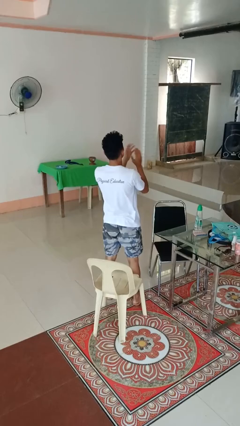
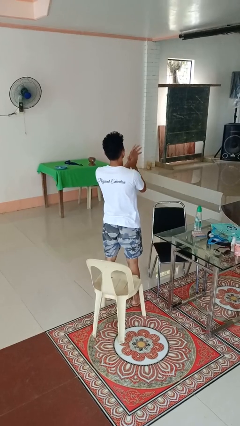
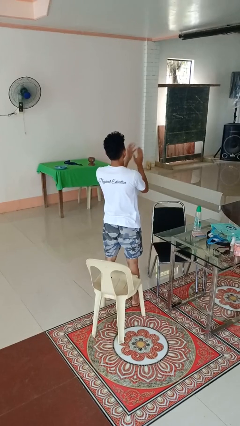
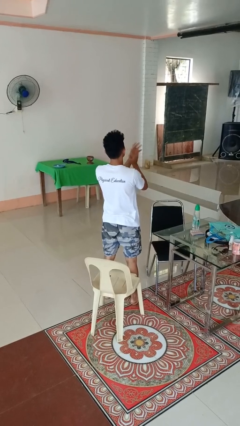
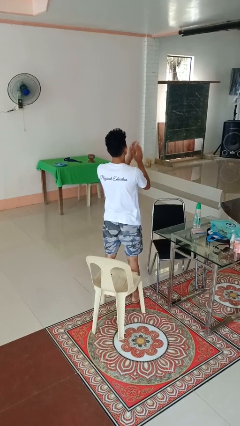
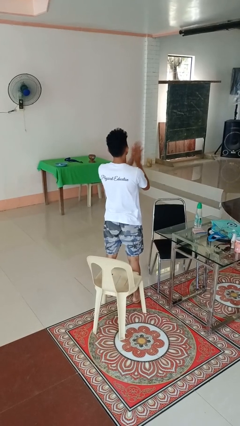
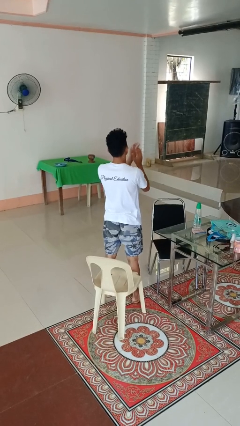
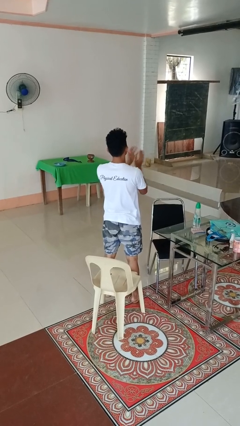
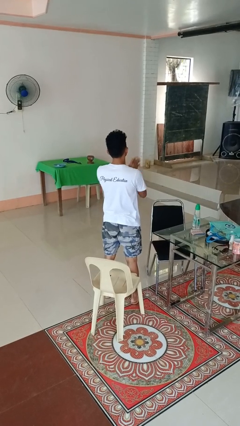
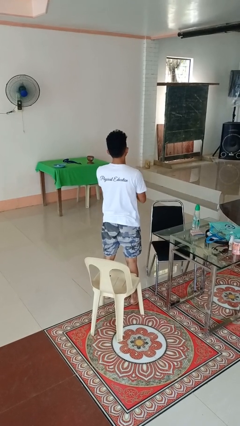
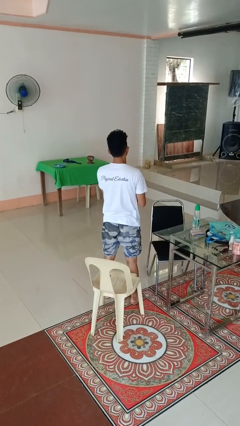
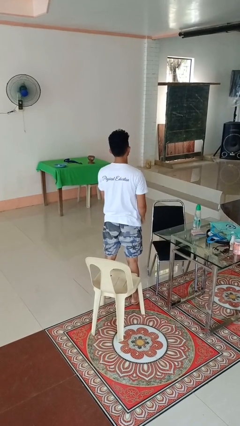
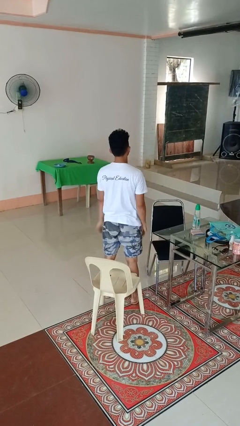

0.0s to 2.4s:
person claps hands

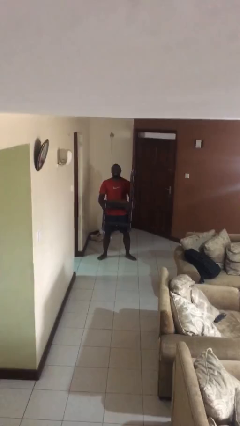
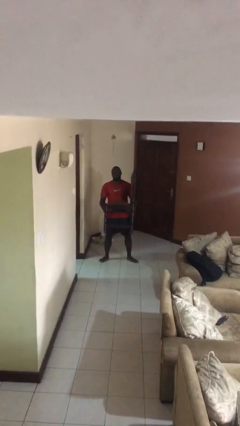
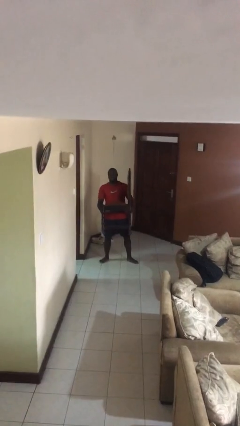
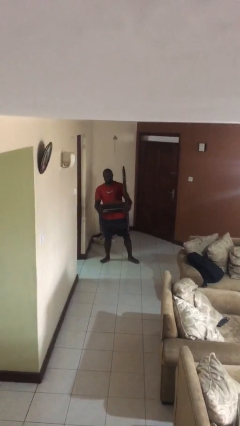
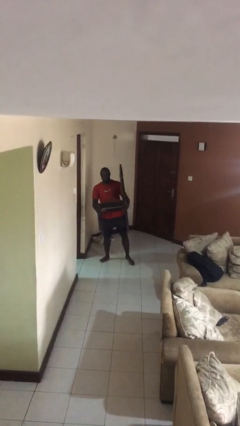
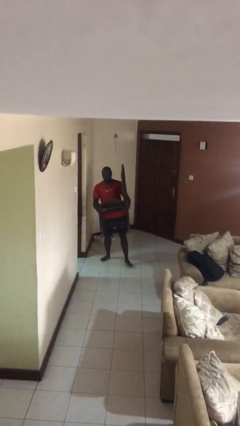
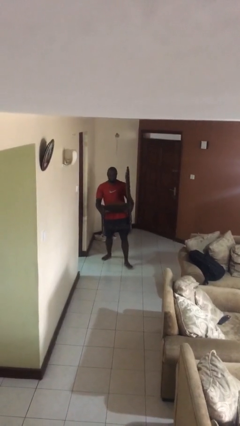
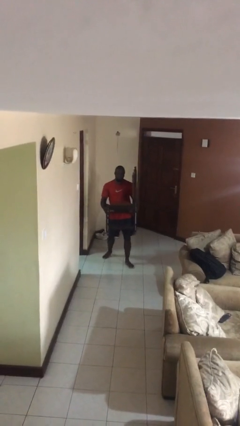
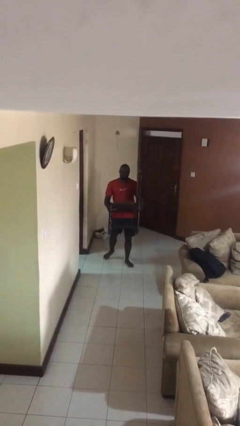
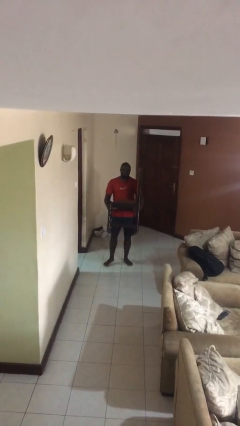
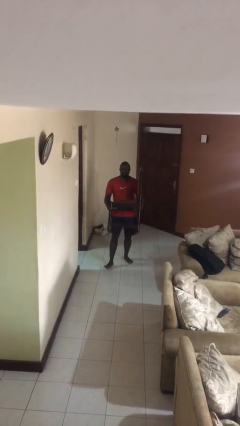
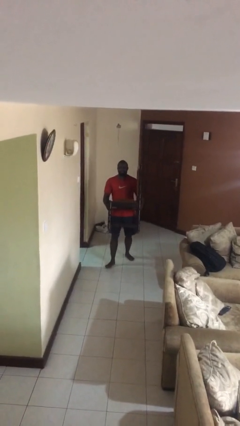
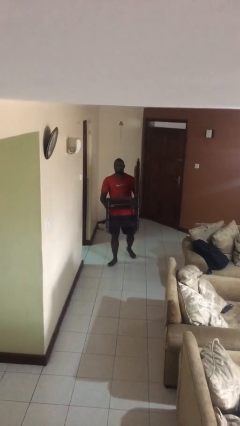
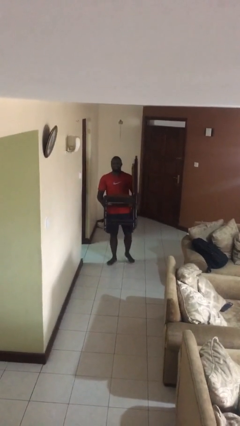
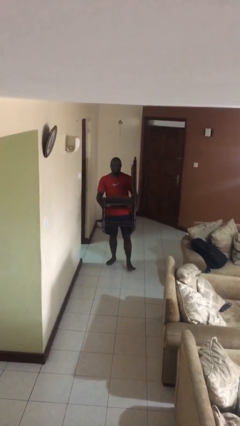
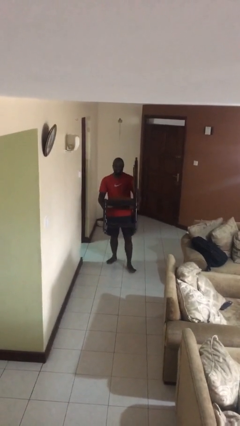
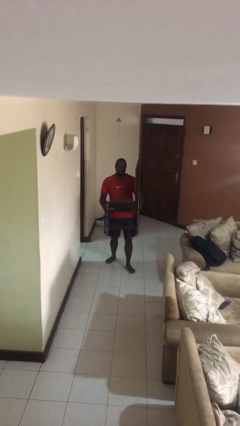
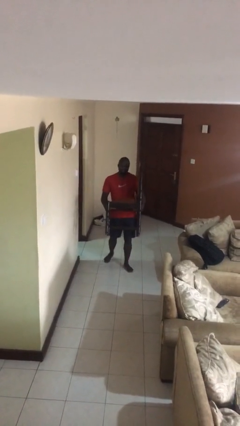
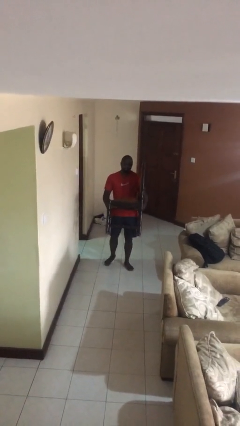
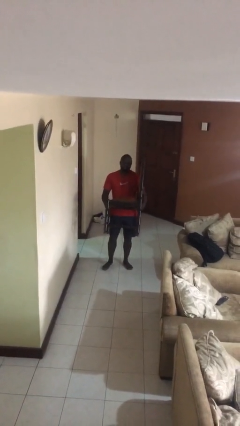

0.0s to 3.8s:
person carries heavy object

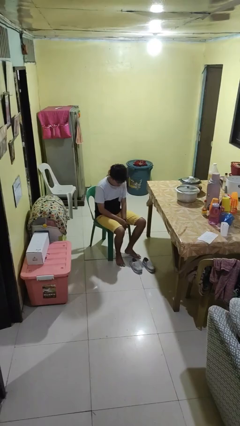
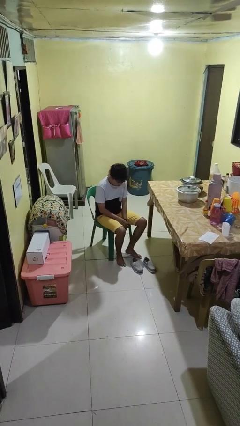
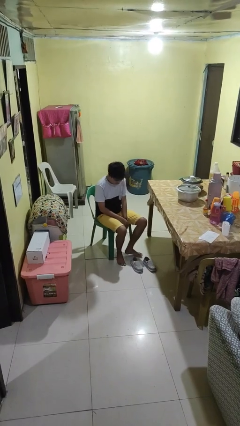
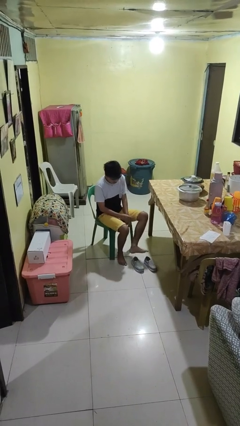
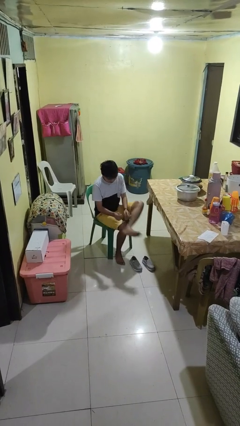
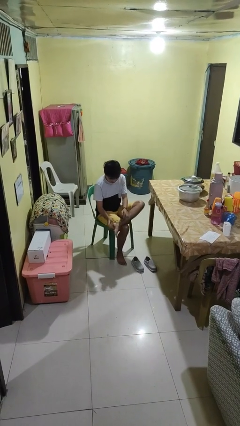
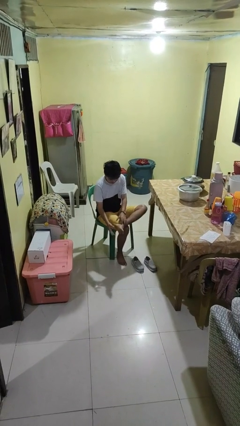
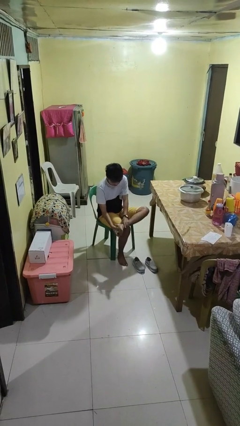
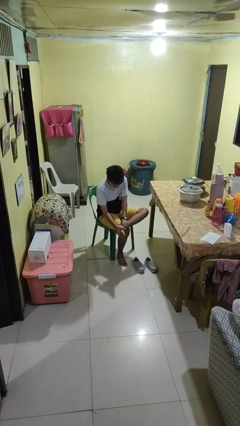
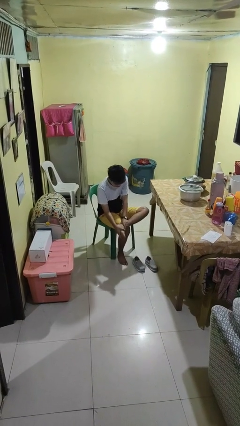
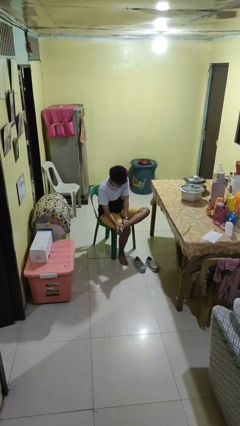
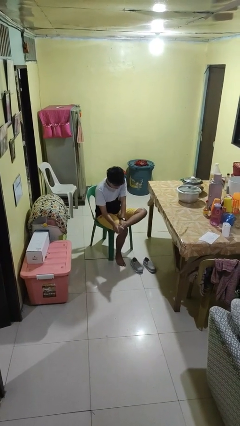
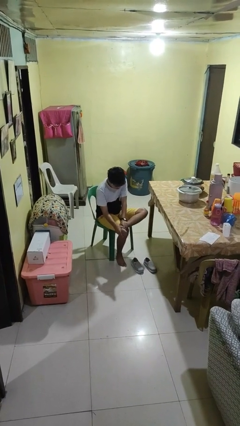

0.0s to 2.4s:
person rubs foot

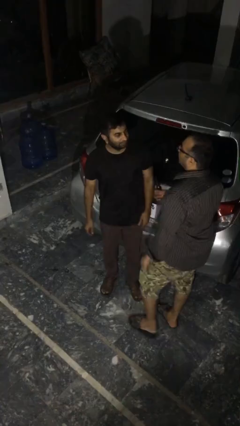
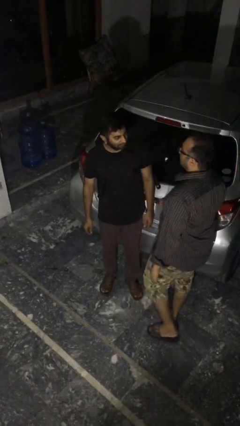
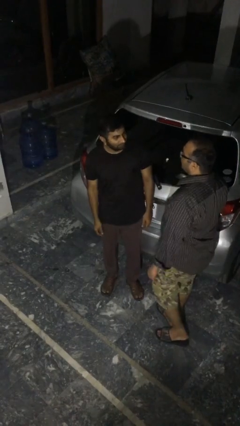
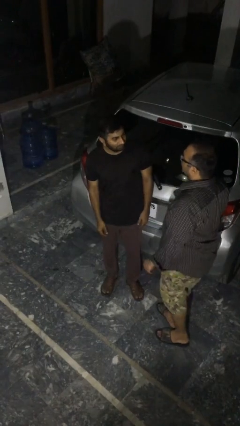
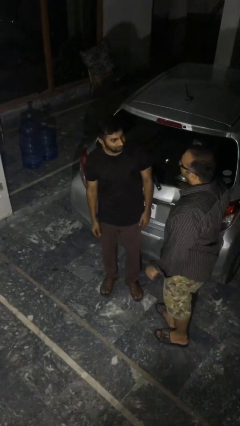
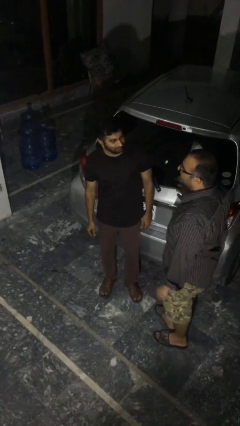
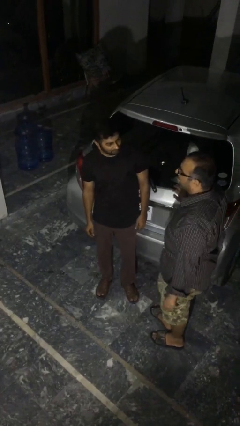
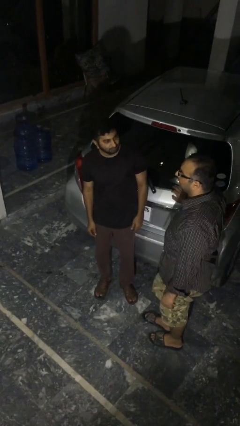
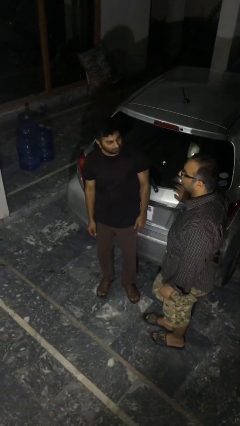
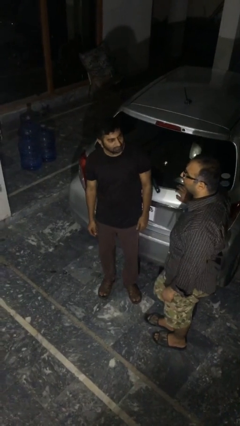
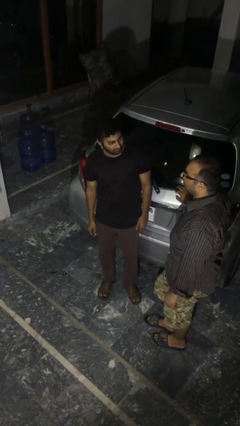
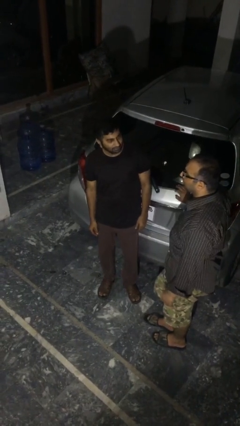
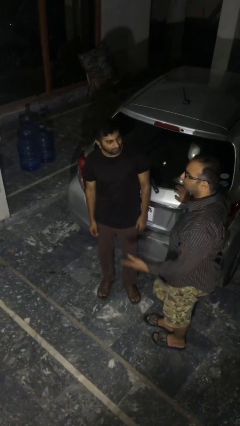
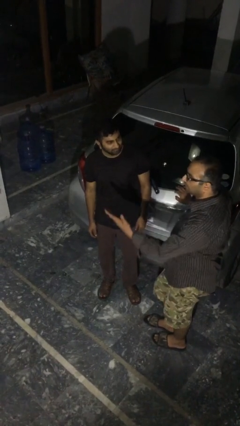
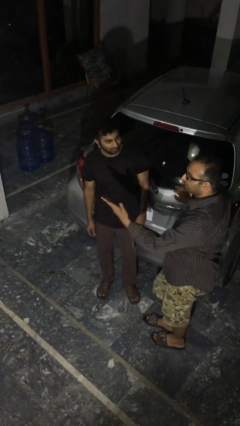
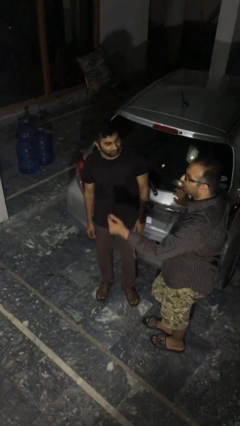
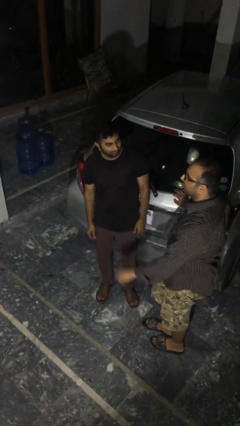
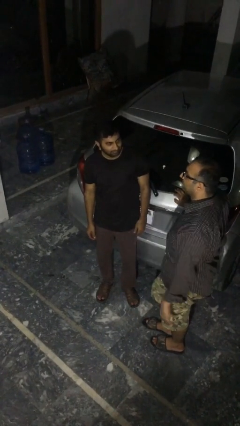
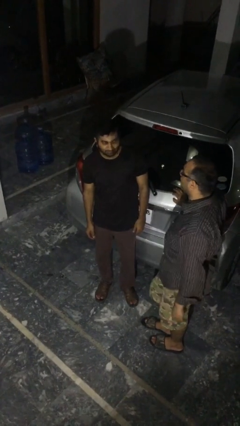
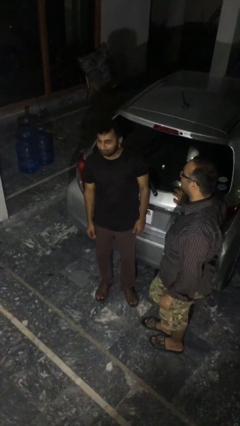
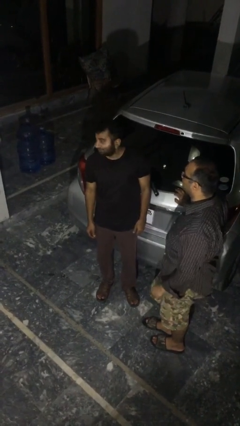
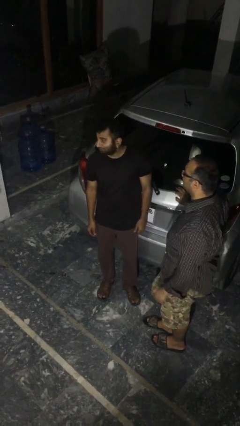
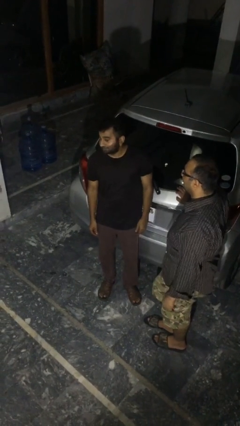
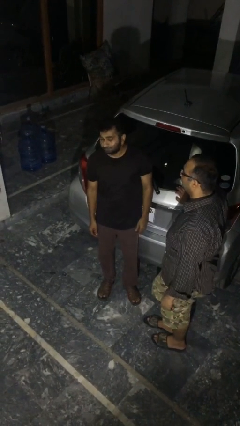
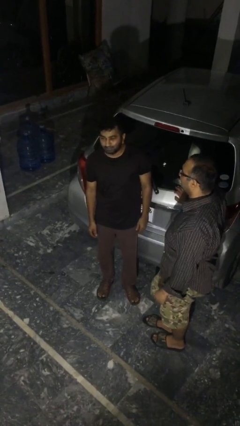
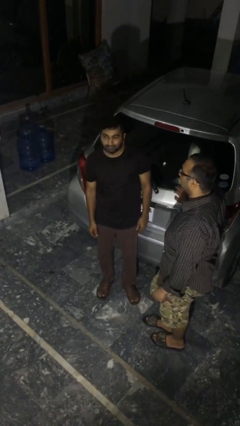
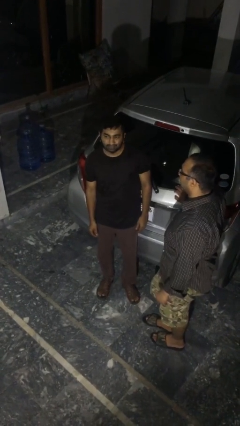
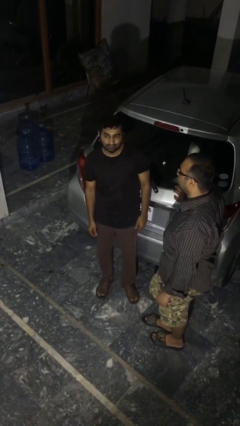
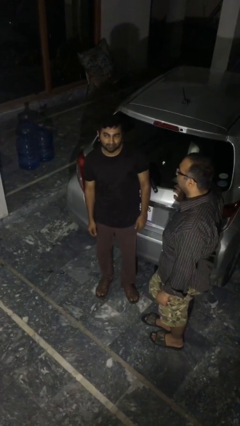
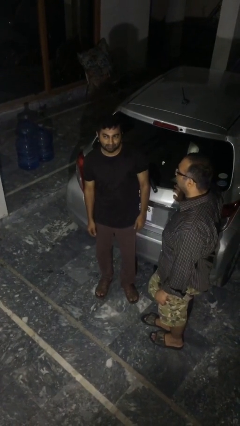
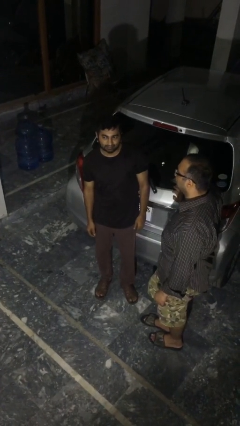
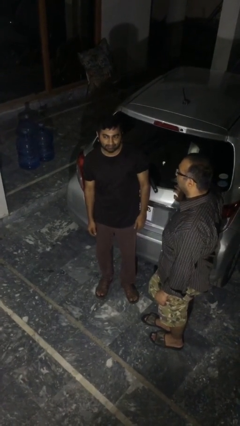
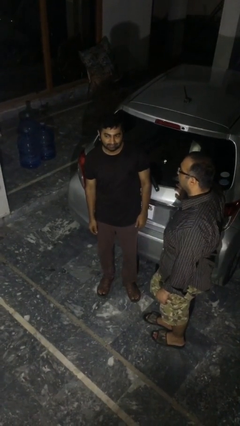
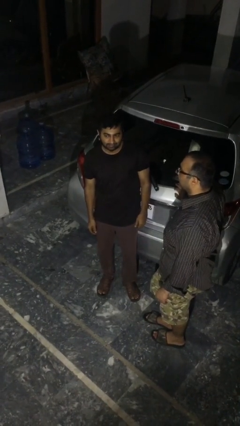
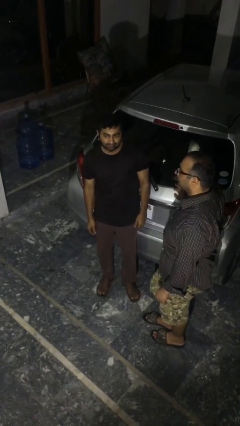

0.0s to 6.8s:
person talks to person

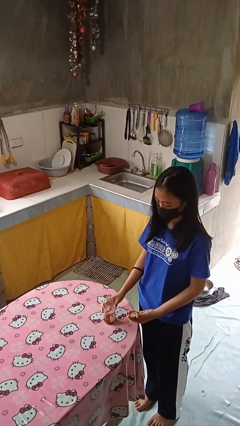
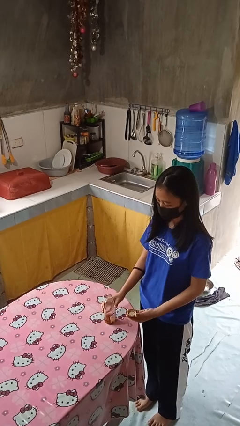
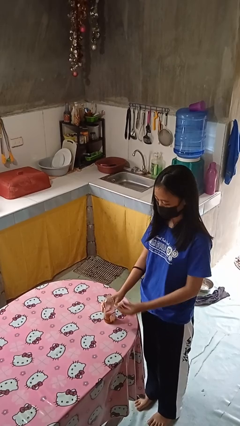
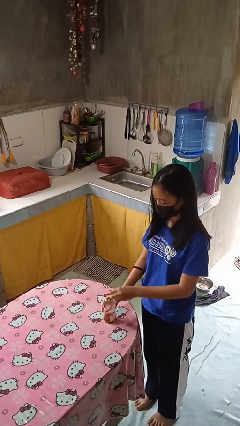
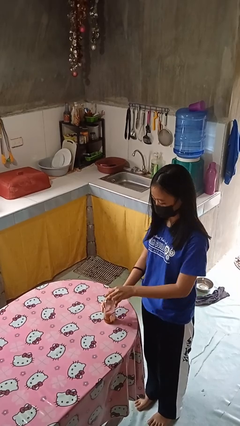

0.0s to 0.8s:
person closes jar

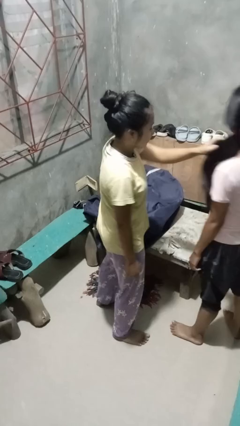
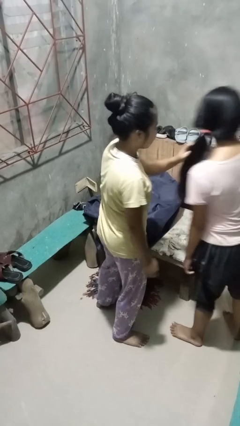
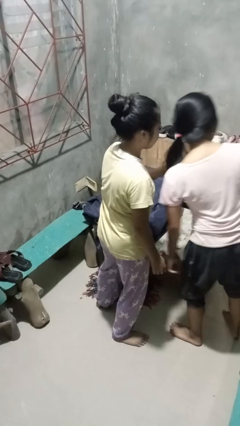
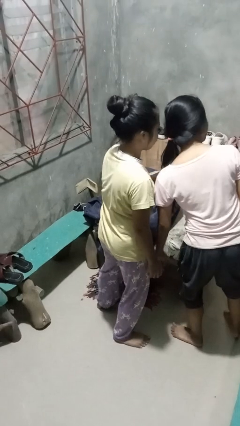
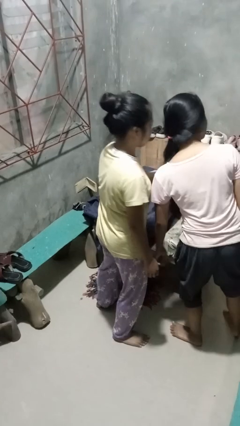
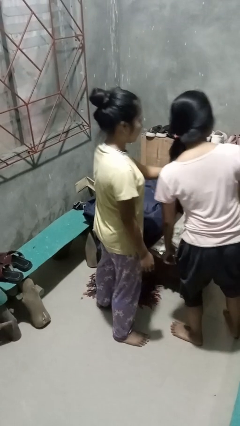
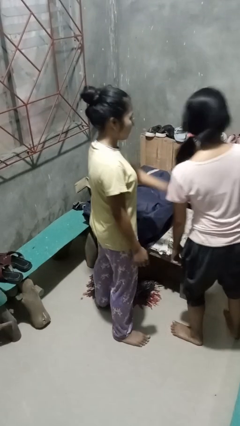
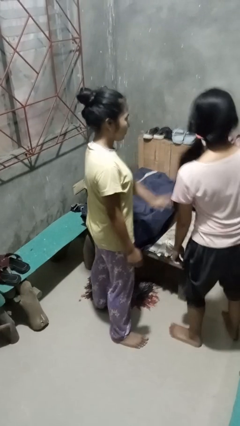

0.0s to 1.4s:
person grabs person by hair
